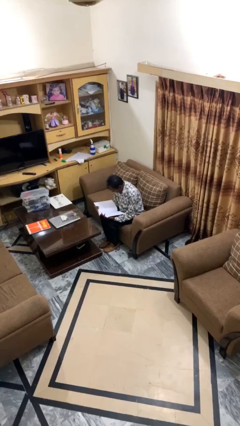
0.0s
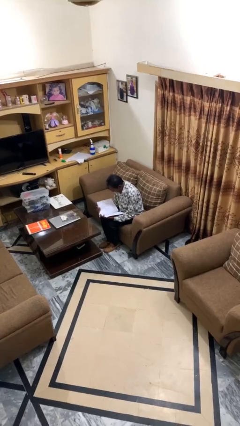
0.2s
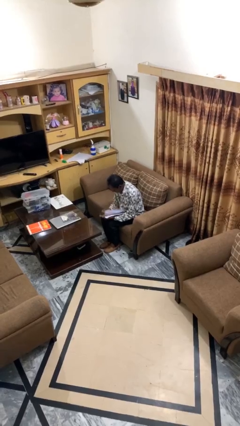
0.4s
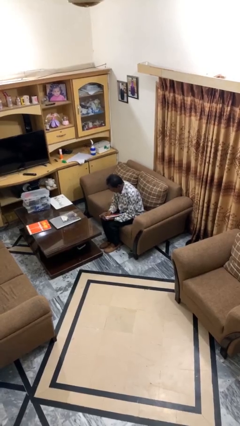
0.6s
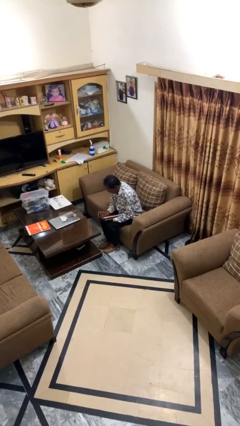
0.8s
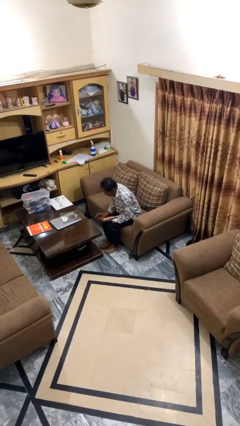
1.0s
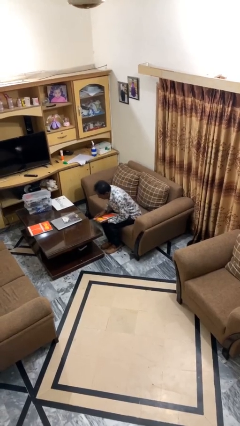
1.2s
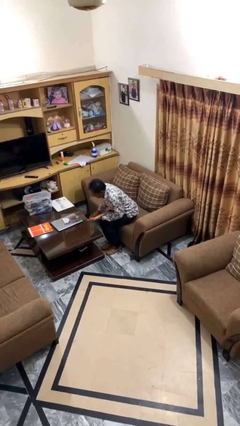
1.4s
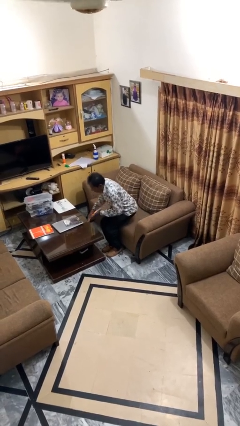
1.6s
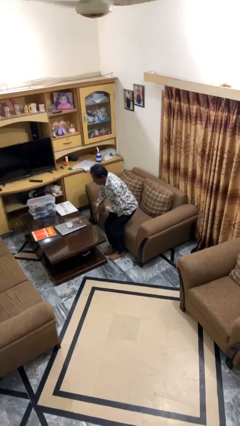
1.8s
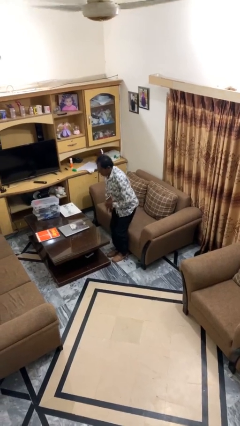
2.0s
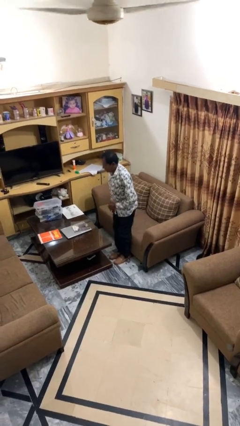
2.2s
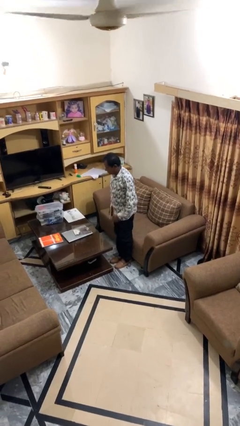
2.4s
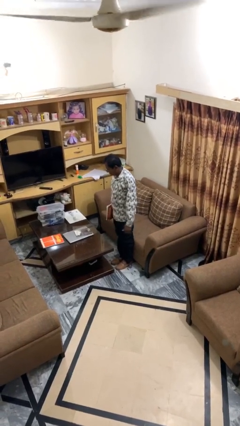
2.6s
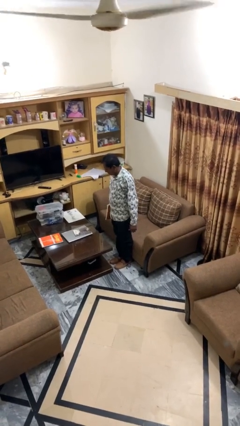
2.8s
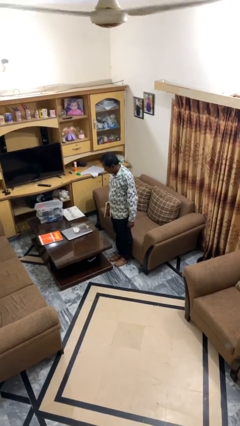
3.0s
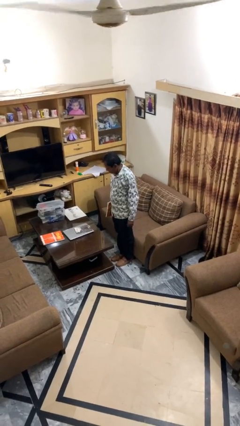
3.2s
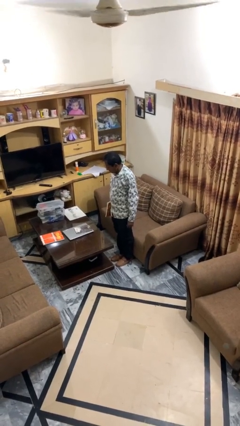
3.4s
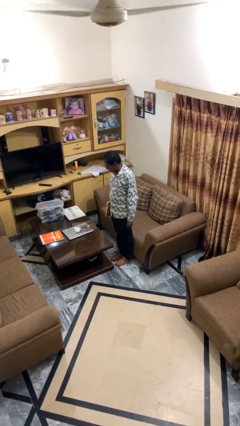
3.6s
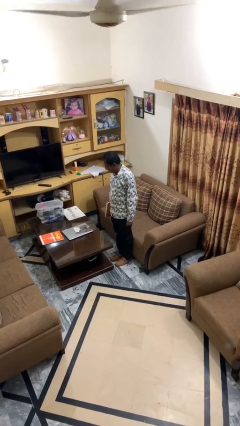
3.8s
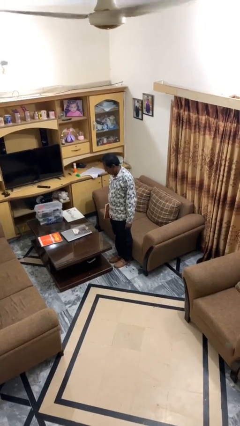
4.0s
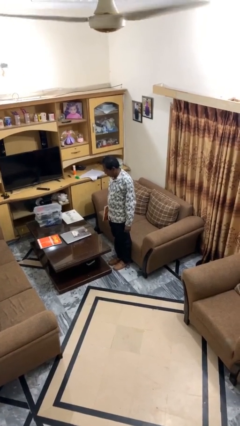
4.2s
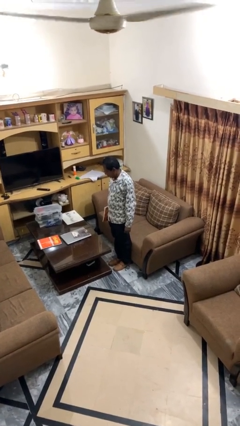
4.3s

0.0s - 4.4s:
person stands up

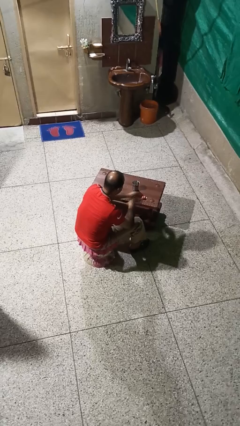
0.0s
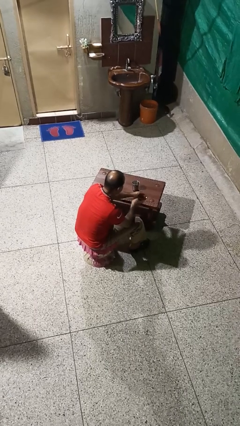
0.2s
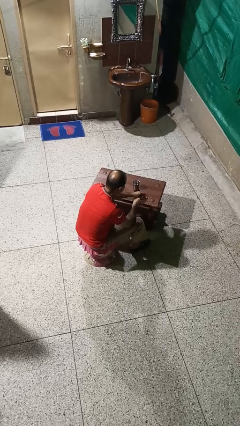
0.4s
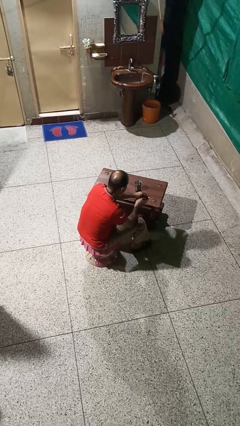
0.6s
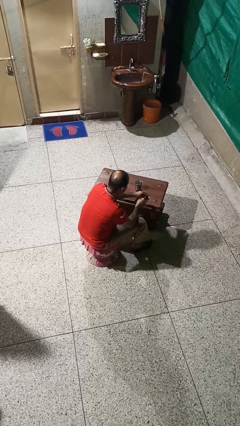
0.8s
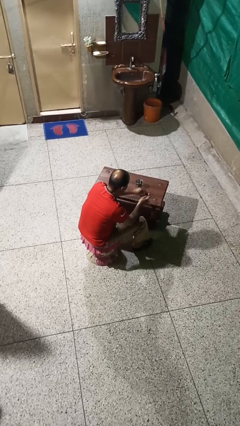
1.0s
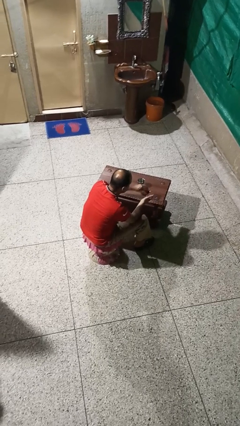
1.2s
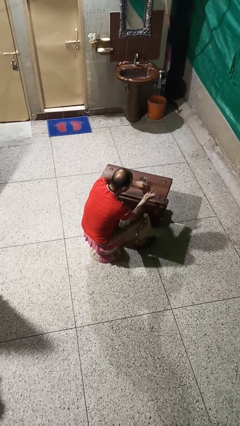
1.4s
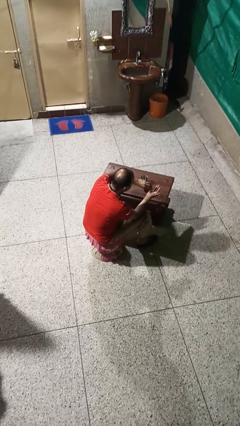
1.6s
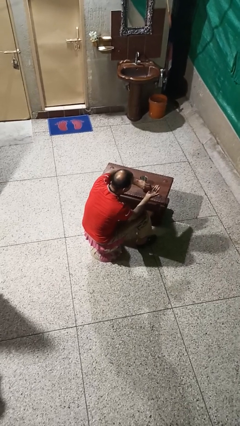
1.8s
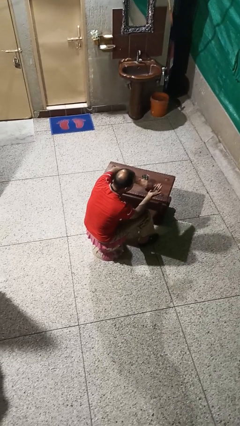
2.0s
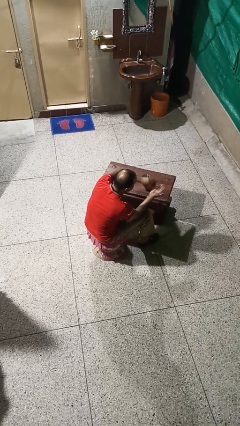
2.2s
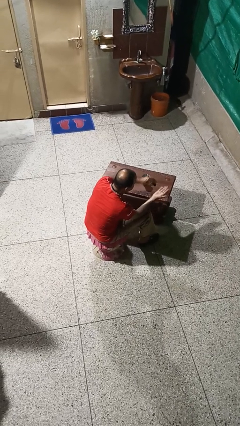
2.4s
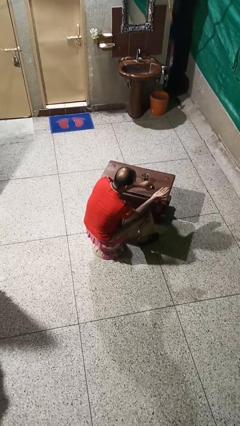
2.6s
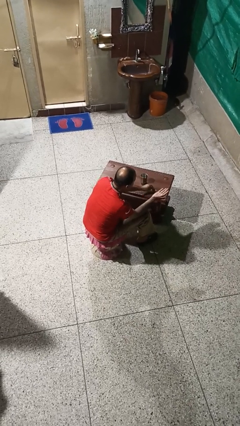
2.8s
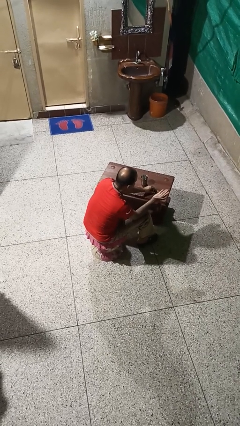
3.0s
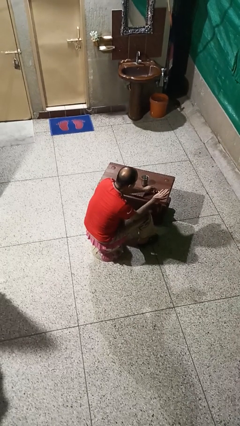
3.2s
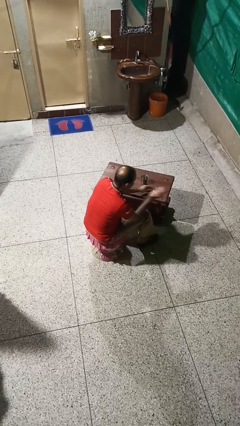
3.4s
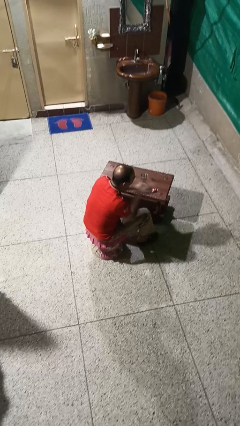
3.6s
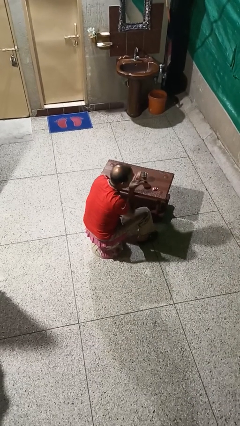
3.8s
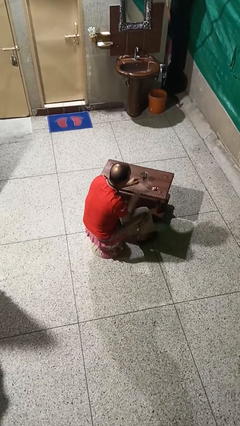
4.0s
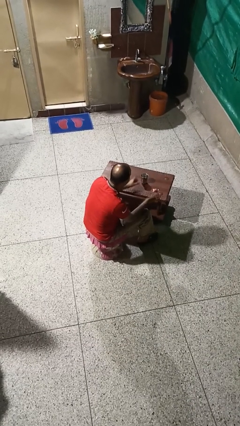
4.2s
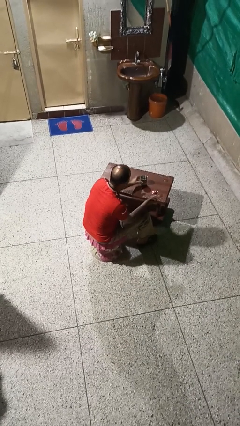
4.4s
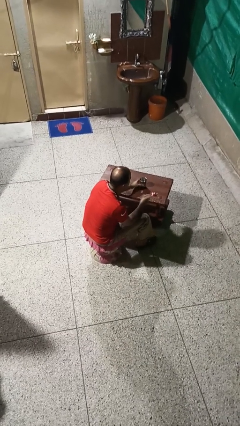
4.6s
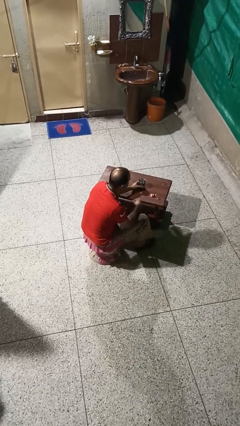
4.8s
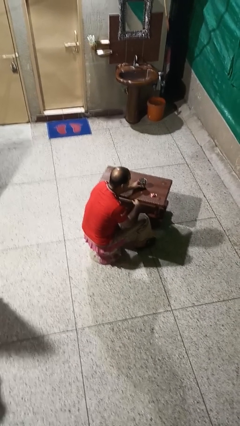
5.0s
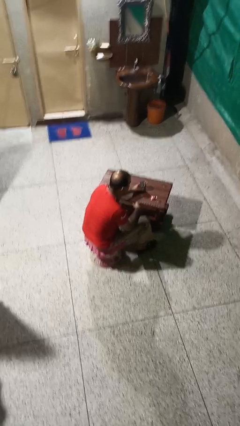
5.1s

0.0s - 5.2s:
person takes medicine pills

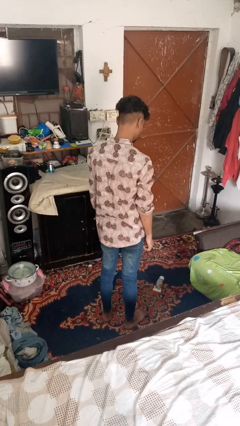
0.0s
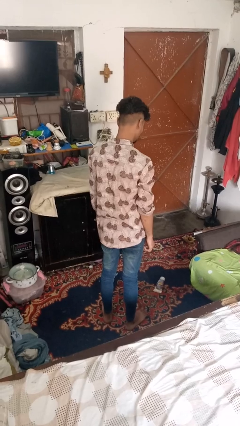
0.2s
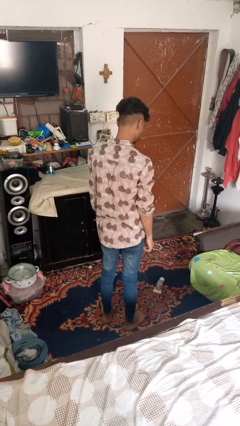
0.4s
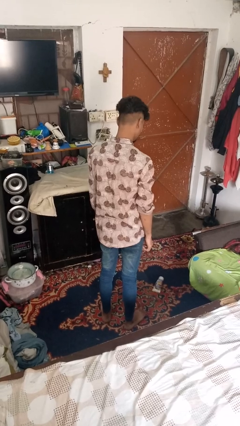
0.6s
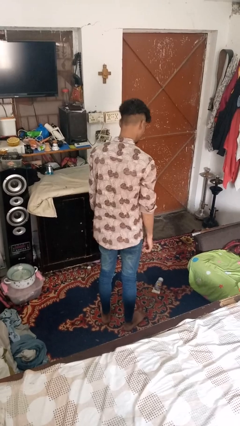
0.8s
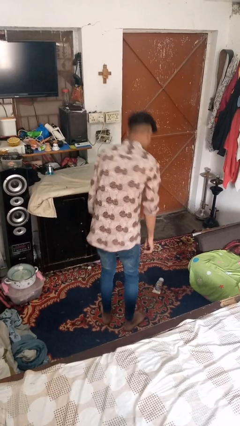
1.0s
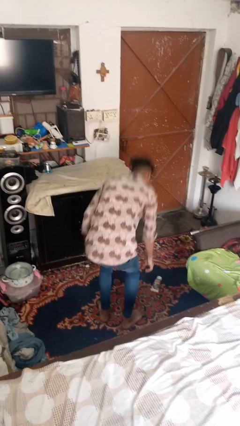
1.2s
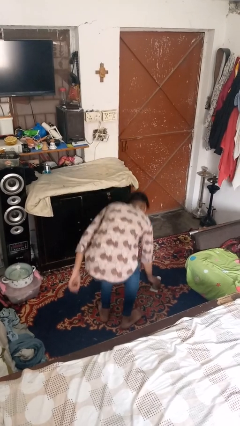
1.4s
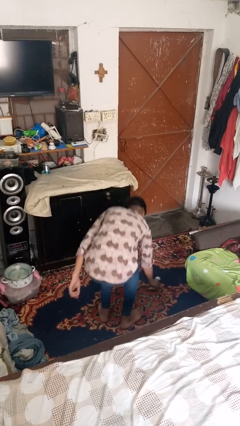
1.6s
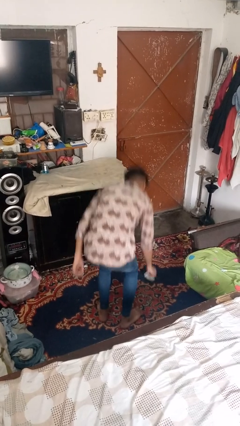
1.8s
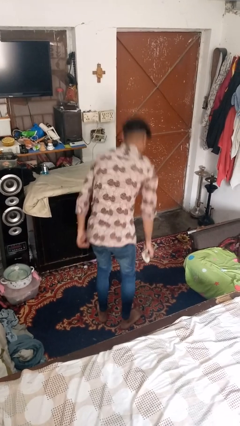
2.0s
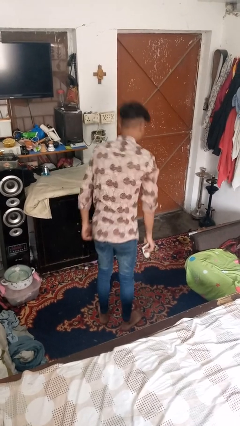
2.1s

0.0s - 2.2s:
person picks up object from floor

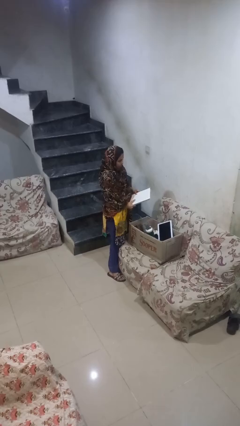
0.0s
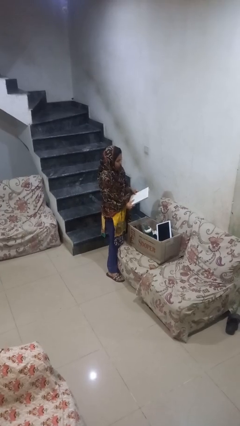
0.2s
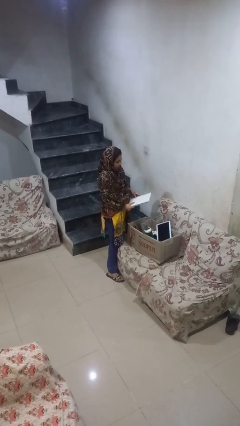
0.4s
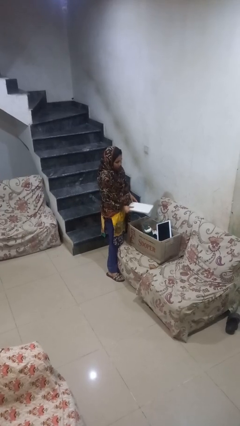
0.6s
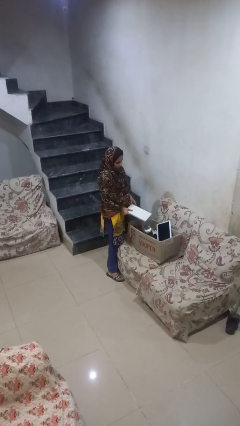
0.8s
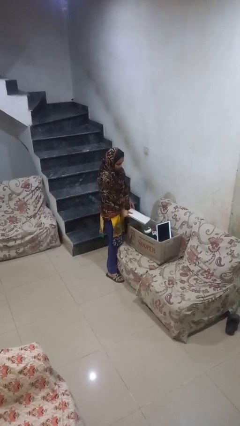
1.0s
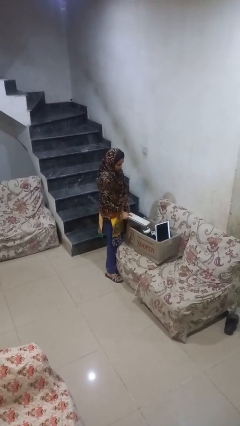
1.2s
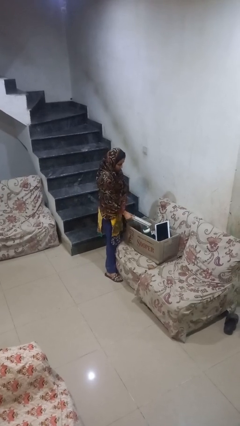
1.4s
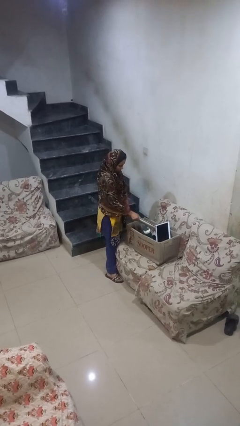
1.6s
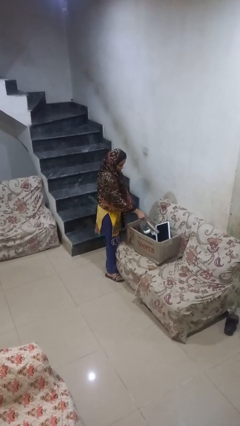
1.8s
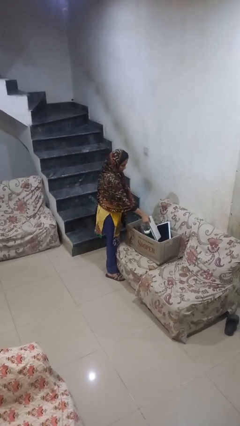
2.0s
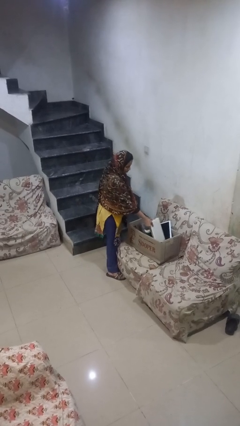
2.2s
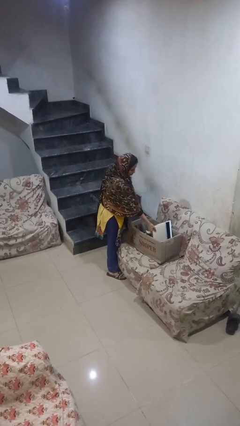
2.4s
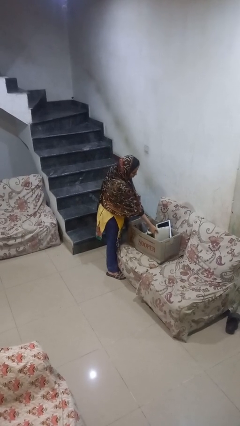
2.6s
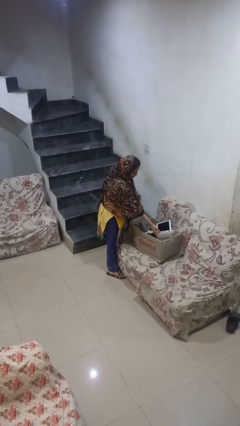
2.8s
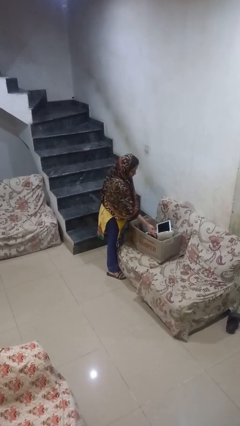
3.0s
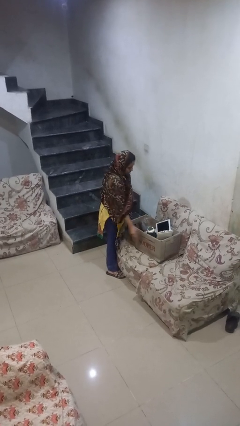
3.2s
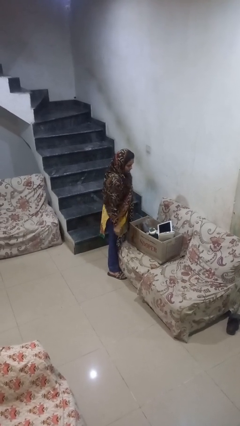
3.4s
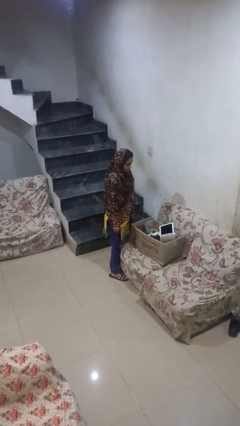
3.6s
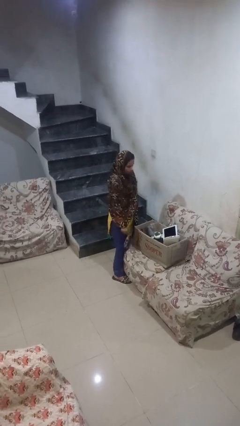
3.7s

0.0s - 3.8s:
person puts object into box

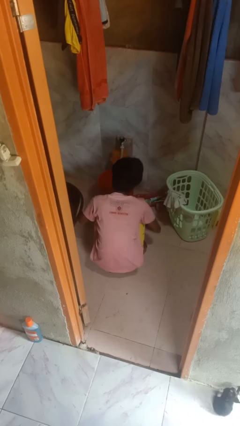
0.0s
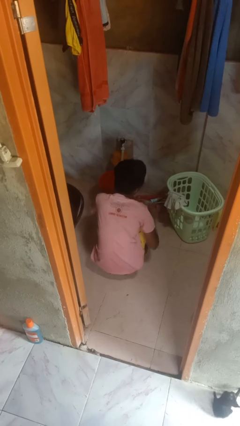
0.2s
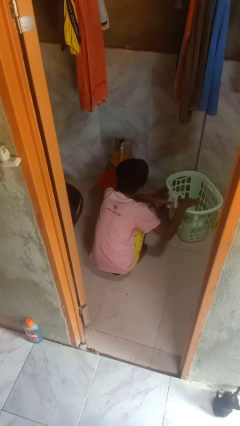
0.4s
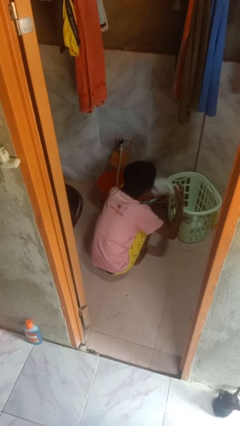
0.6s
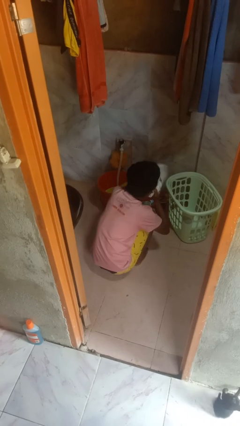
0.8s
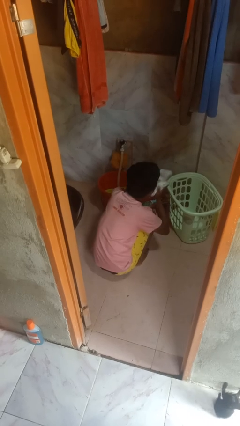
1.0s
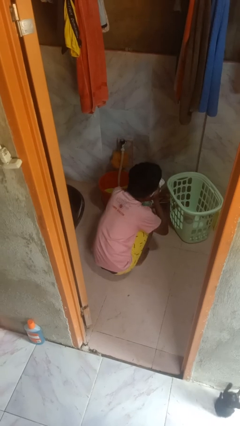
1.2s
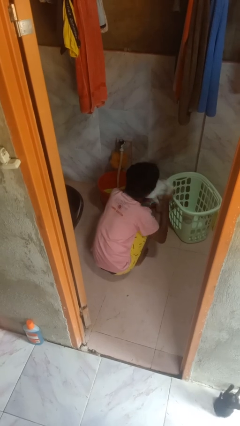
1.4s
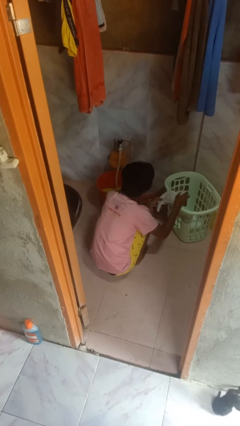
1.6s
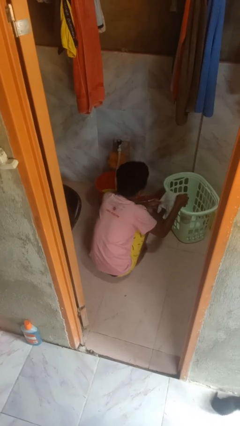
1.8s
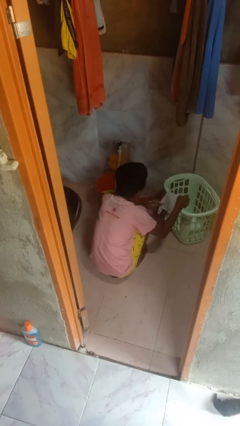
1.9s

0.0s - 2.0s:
person dries face with towel
